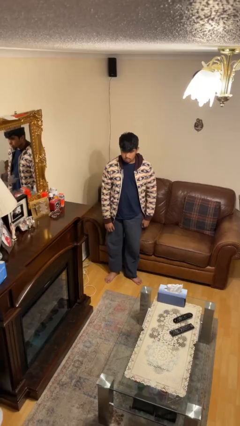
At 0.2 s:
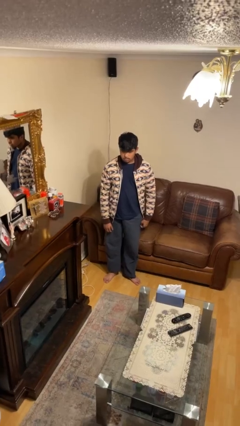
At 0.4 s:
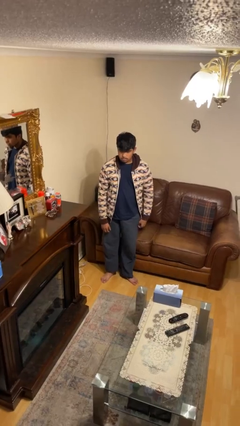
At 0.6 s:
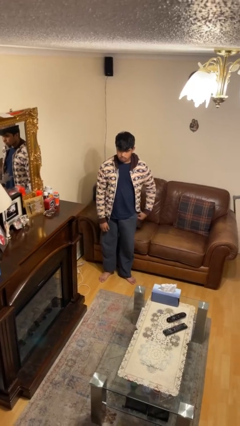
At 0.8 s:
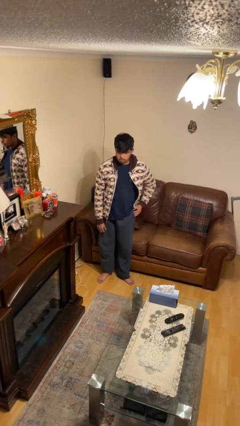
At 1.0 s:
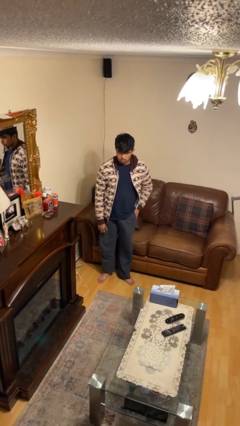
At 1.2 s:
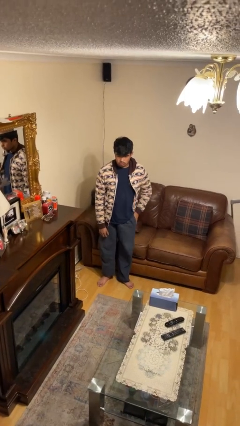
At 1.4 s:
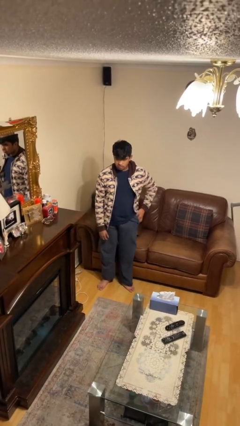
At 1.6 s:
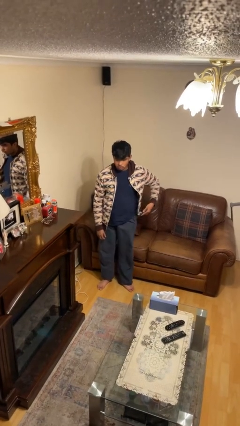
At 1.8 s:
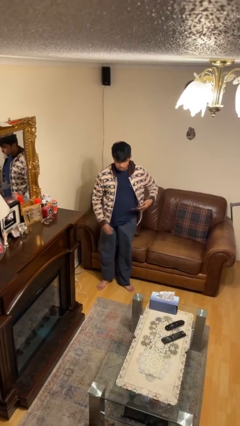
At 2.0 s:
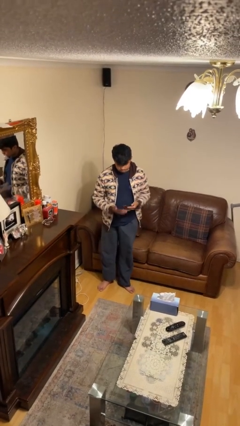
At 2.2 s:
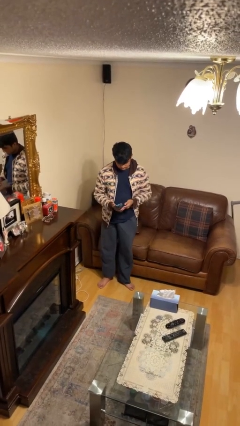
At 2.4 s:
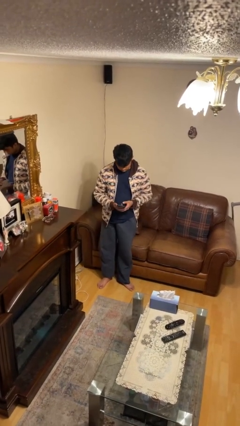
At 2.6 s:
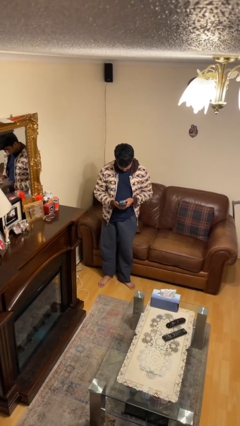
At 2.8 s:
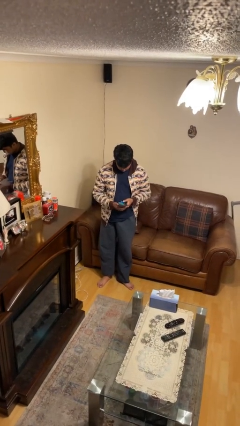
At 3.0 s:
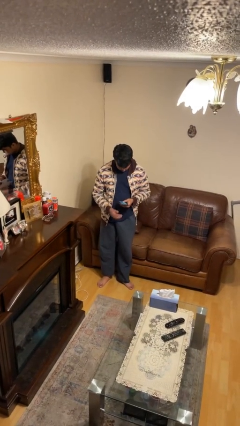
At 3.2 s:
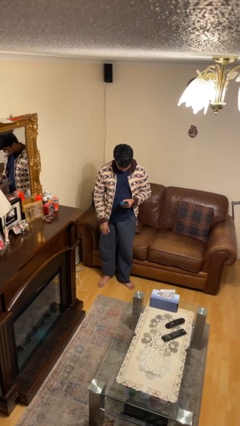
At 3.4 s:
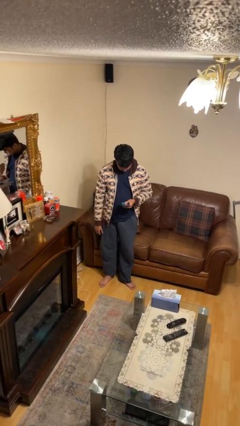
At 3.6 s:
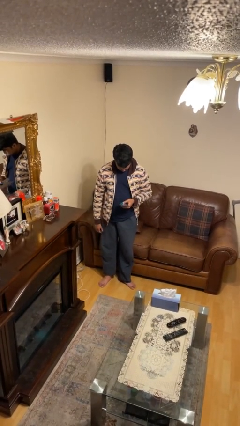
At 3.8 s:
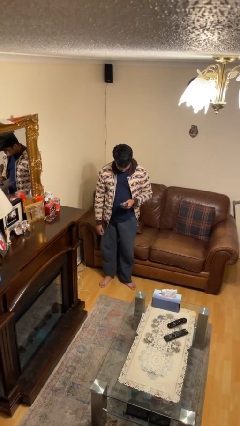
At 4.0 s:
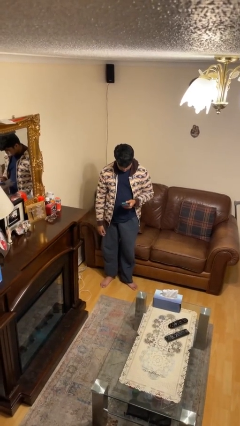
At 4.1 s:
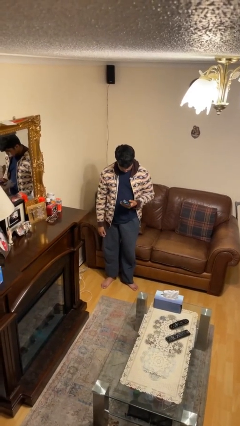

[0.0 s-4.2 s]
person takes phone from pocket

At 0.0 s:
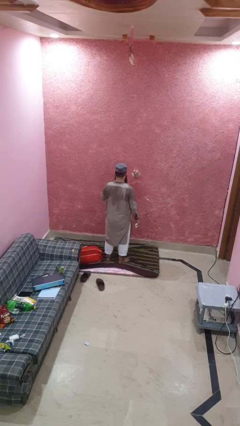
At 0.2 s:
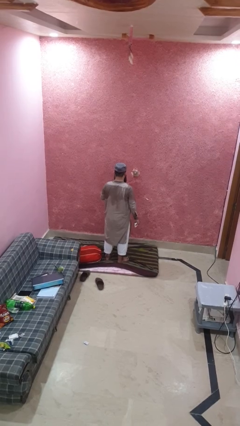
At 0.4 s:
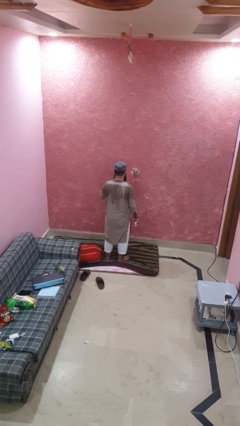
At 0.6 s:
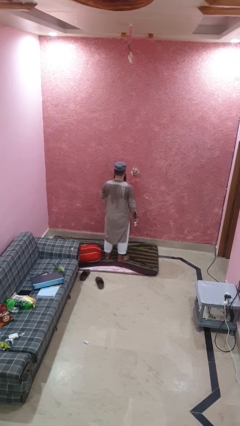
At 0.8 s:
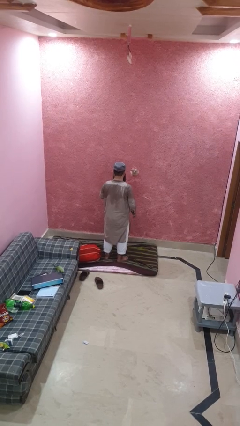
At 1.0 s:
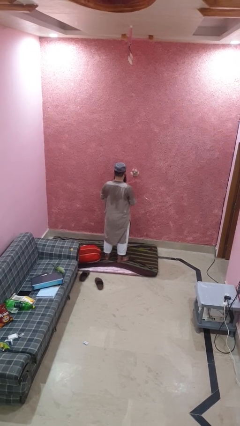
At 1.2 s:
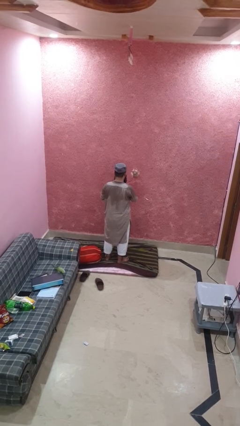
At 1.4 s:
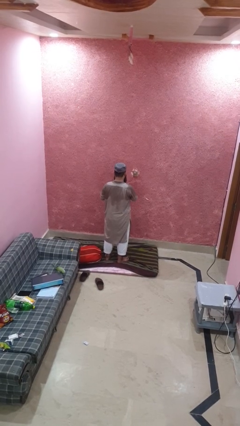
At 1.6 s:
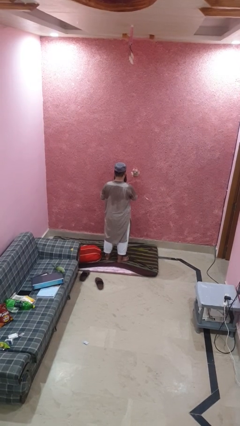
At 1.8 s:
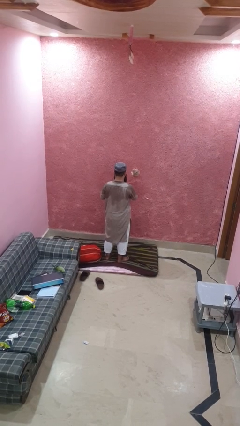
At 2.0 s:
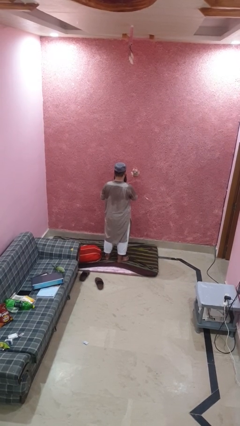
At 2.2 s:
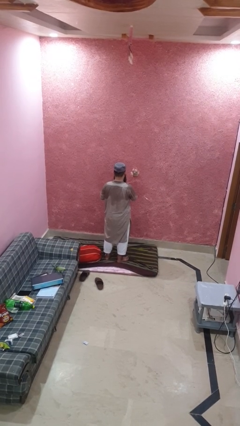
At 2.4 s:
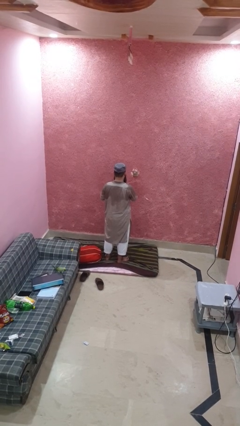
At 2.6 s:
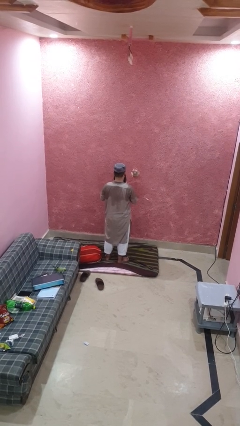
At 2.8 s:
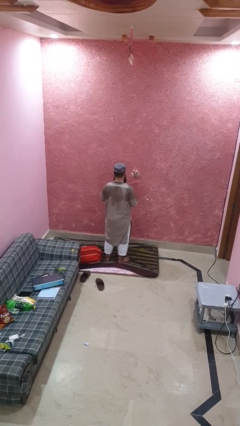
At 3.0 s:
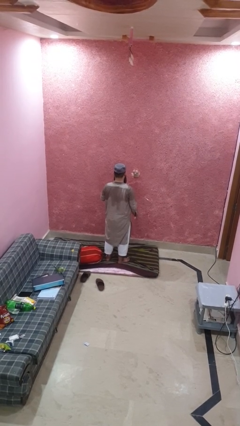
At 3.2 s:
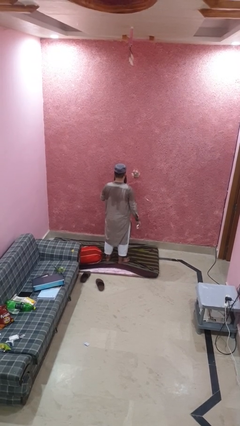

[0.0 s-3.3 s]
person wipes mouth with napkin

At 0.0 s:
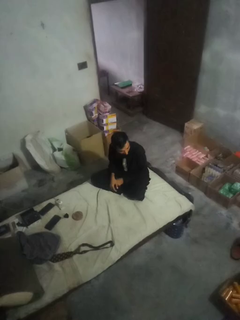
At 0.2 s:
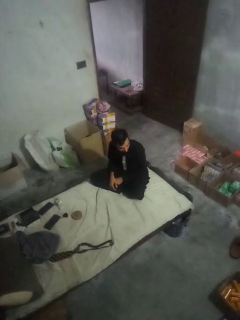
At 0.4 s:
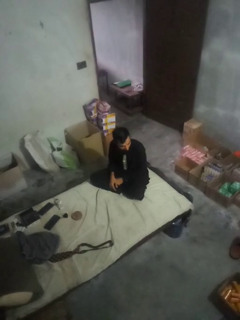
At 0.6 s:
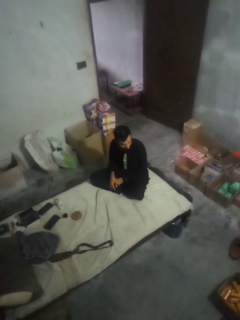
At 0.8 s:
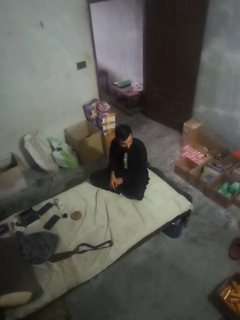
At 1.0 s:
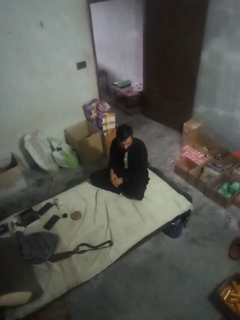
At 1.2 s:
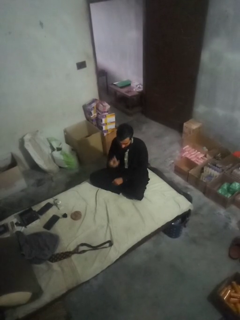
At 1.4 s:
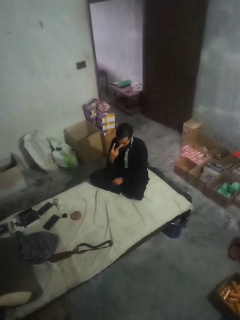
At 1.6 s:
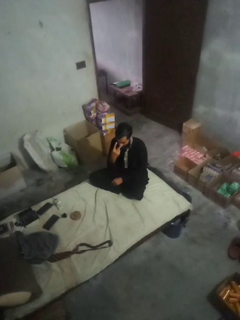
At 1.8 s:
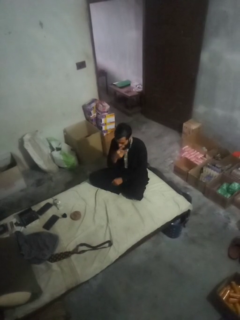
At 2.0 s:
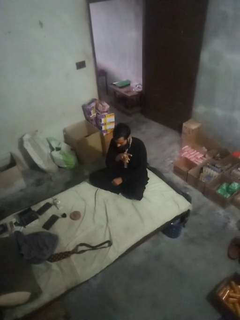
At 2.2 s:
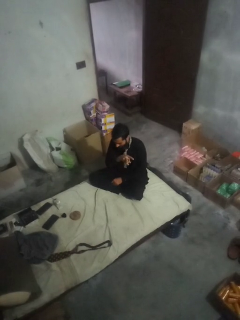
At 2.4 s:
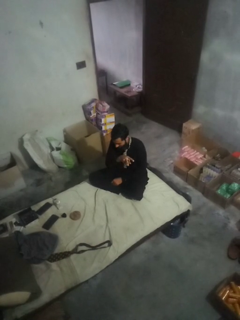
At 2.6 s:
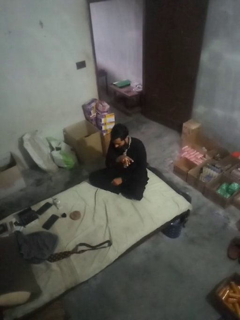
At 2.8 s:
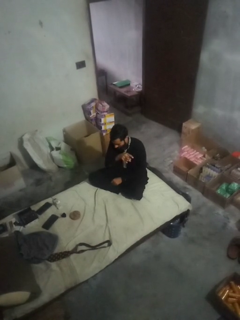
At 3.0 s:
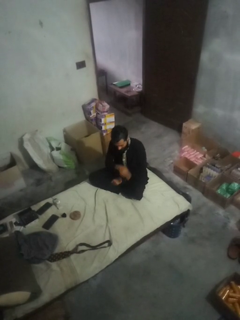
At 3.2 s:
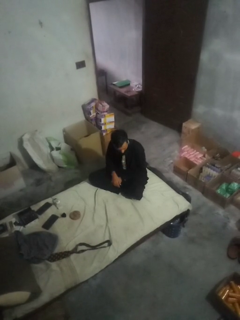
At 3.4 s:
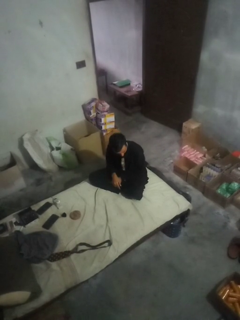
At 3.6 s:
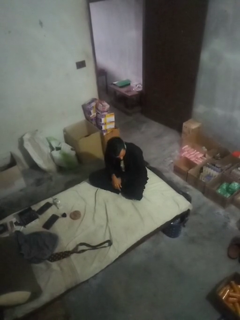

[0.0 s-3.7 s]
person gestures watch closely

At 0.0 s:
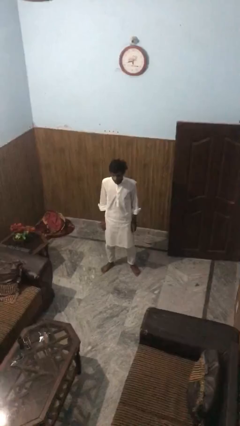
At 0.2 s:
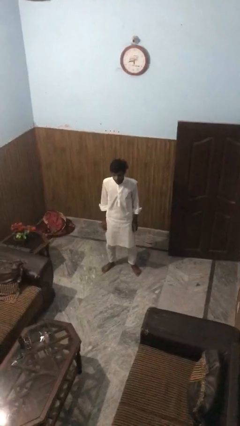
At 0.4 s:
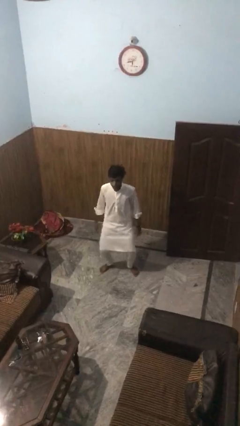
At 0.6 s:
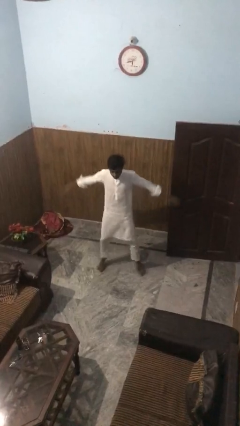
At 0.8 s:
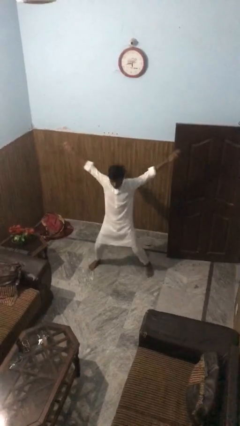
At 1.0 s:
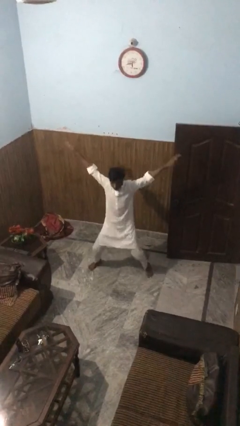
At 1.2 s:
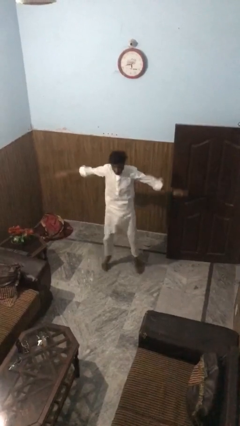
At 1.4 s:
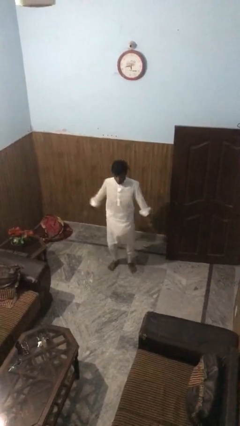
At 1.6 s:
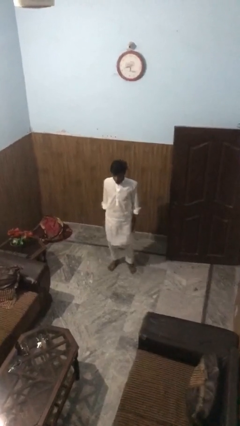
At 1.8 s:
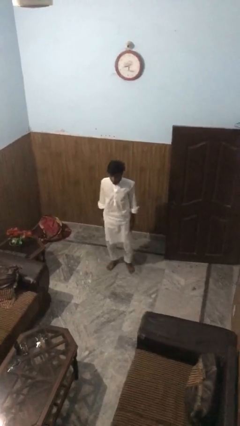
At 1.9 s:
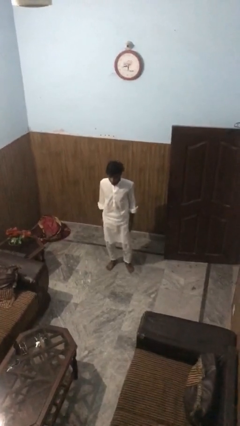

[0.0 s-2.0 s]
person exercises with jumping jacks

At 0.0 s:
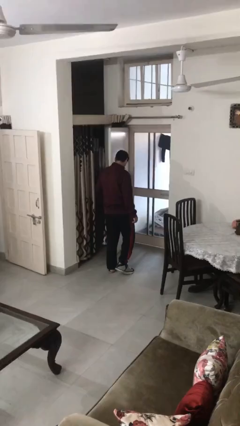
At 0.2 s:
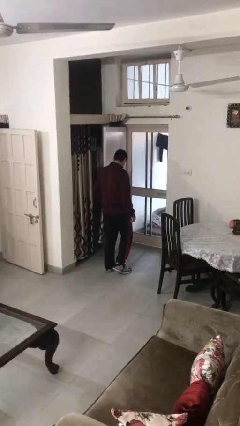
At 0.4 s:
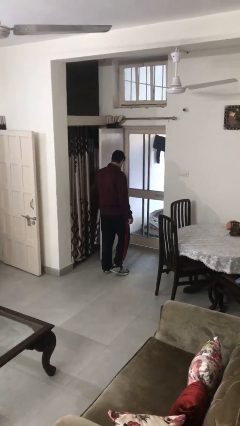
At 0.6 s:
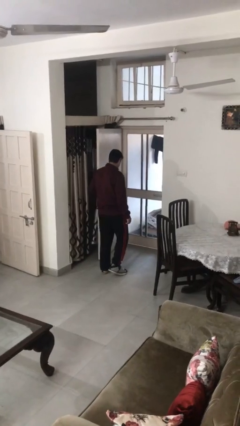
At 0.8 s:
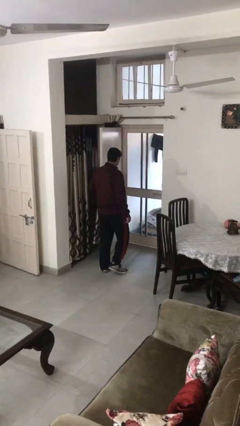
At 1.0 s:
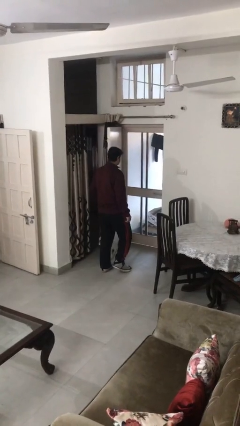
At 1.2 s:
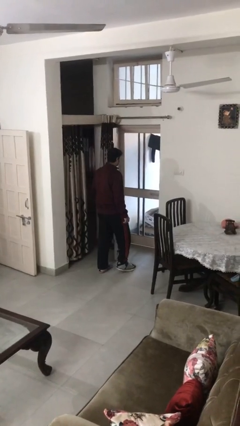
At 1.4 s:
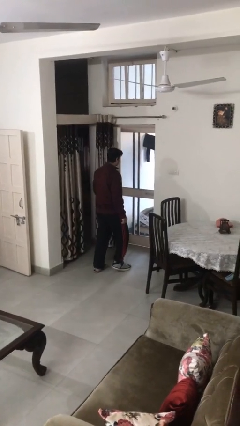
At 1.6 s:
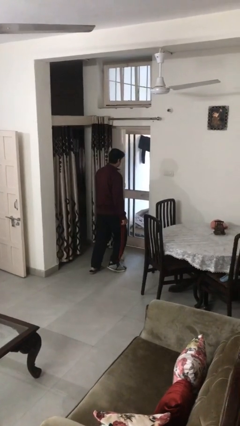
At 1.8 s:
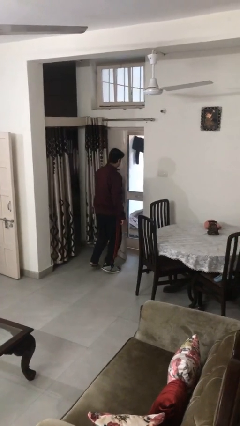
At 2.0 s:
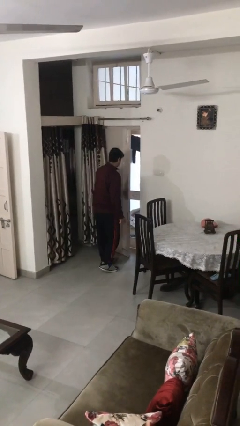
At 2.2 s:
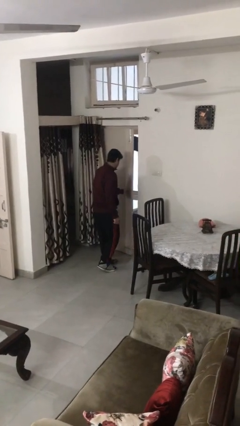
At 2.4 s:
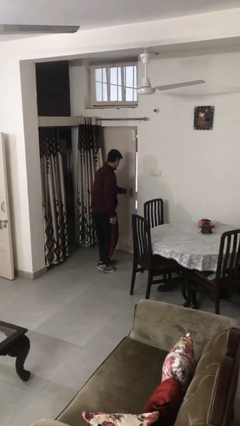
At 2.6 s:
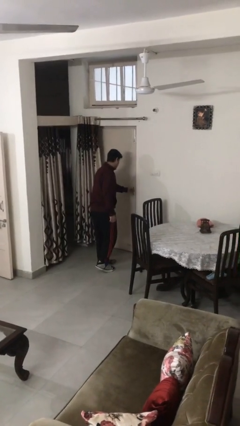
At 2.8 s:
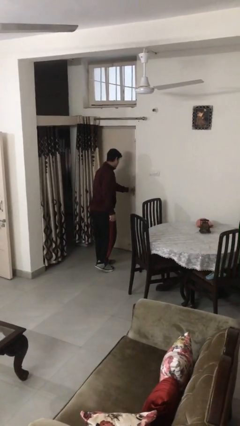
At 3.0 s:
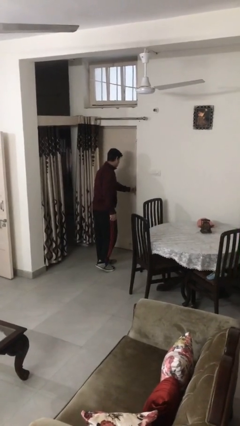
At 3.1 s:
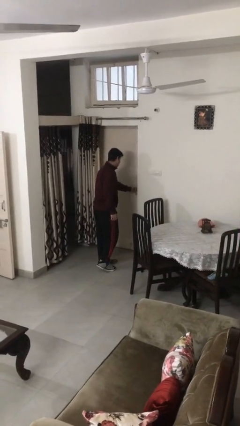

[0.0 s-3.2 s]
person closes facility door

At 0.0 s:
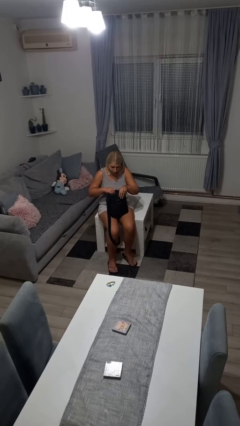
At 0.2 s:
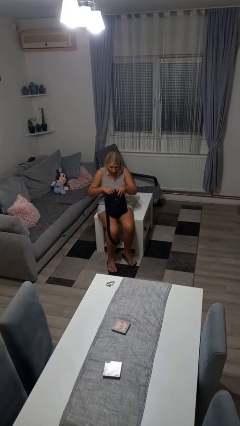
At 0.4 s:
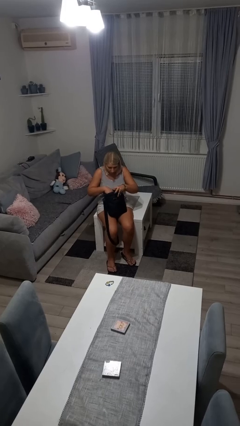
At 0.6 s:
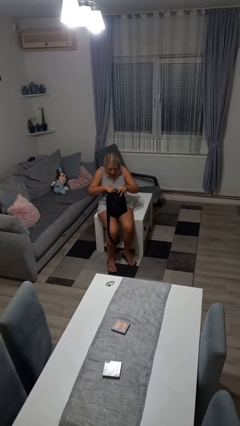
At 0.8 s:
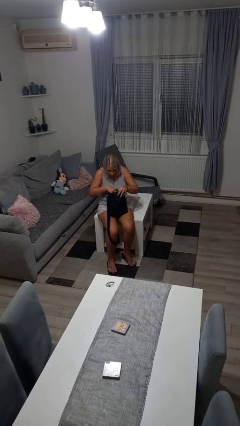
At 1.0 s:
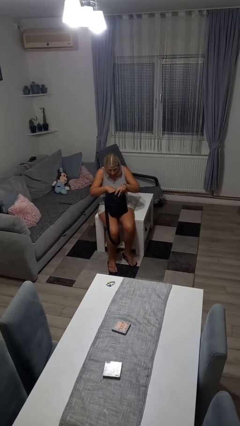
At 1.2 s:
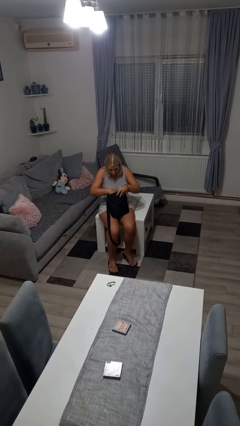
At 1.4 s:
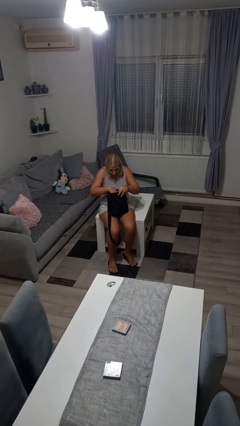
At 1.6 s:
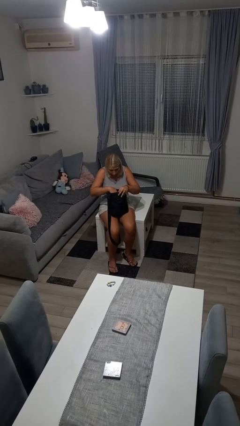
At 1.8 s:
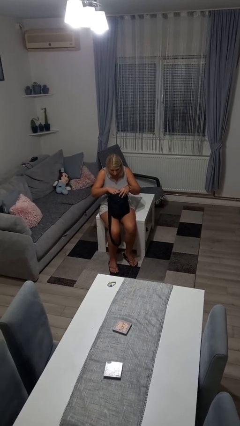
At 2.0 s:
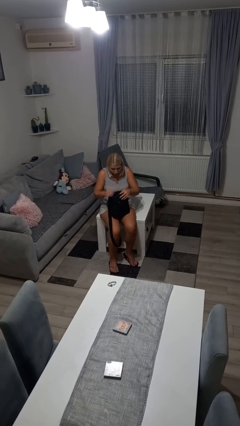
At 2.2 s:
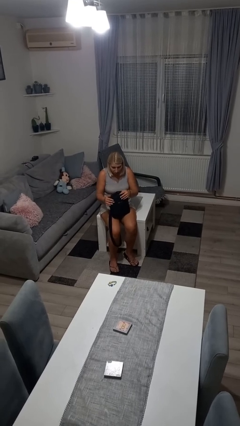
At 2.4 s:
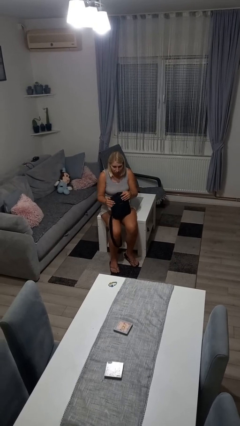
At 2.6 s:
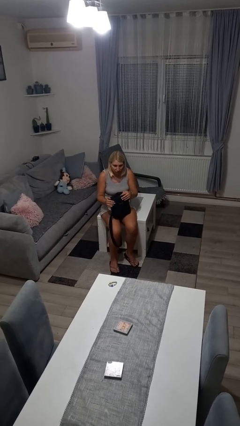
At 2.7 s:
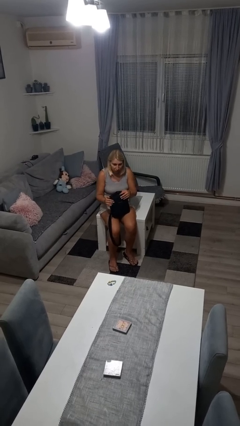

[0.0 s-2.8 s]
person searches in bag
